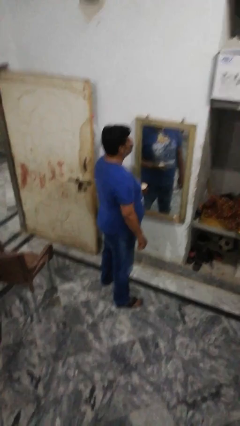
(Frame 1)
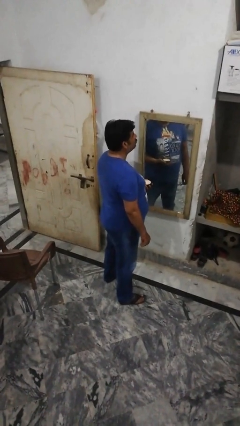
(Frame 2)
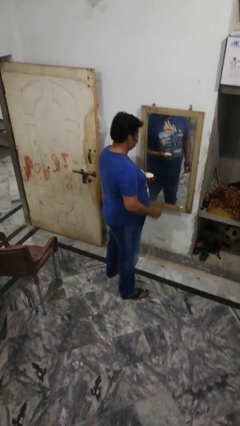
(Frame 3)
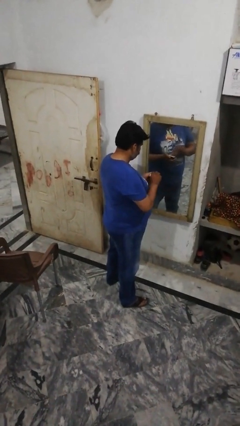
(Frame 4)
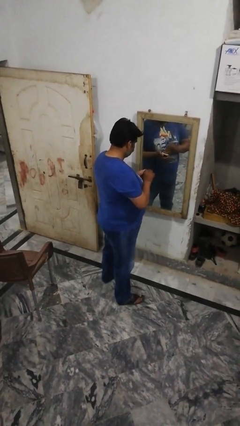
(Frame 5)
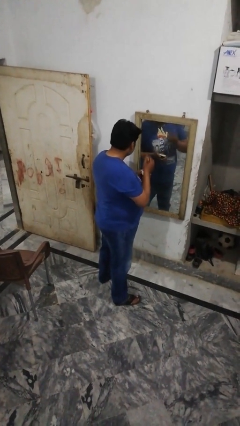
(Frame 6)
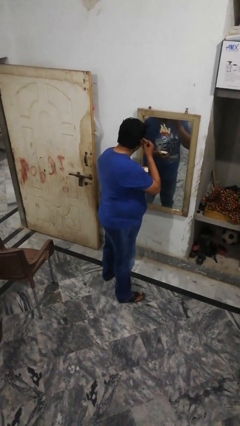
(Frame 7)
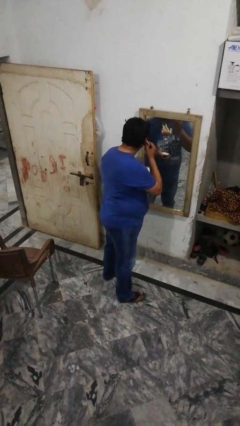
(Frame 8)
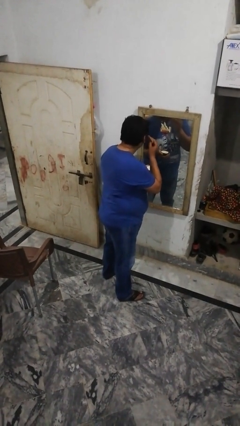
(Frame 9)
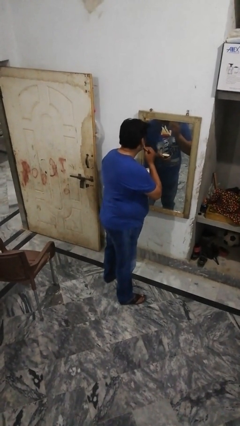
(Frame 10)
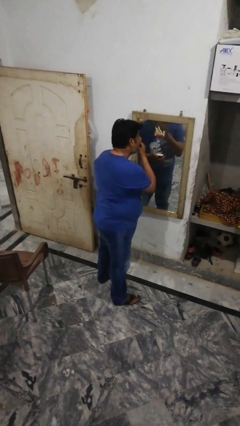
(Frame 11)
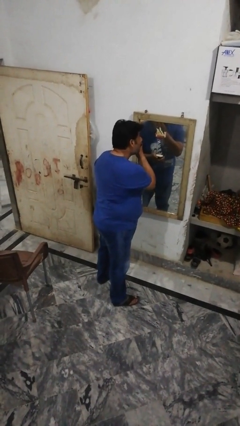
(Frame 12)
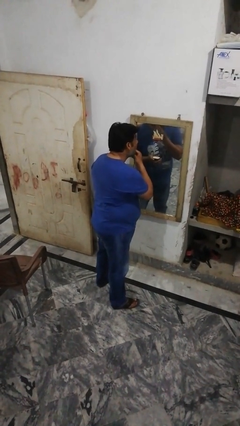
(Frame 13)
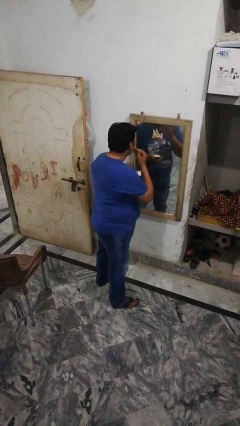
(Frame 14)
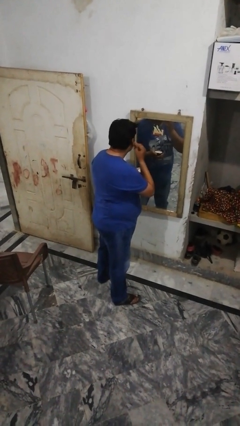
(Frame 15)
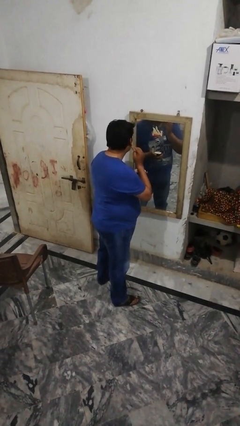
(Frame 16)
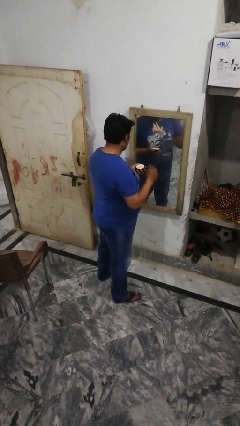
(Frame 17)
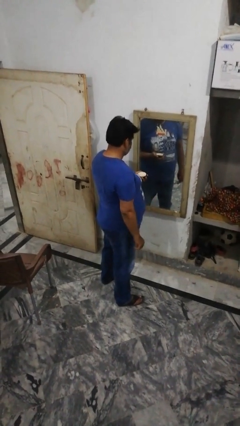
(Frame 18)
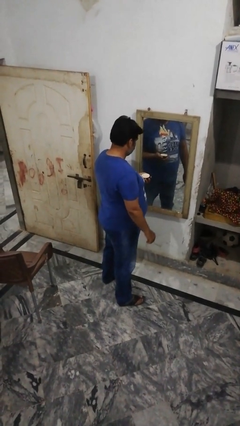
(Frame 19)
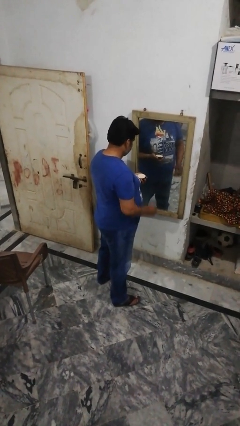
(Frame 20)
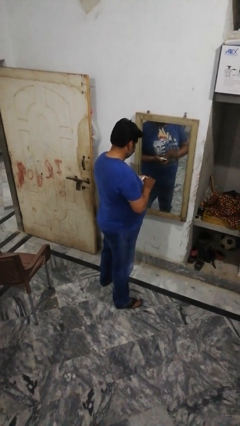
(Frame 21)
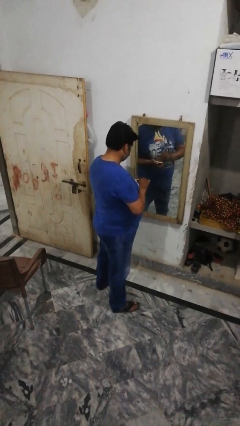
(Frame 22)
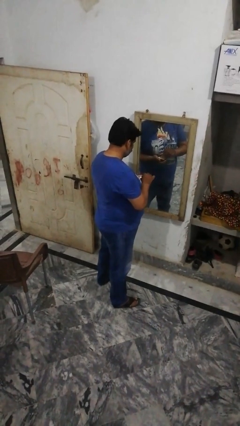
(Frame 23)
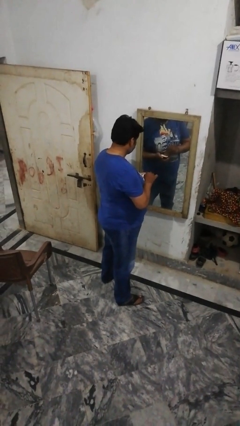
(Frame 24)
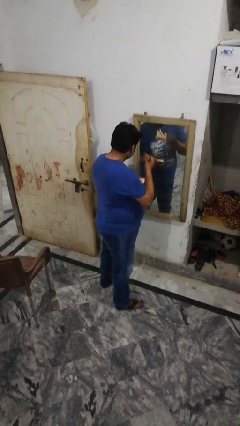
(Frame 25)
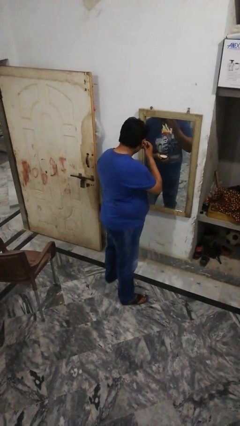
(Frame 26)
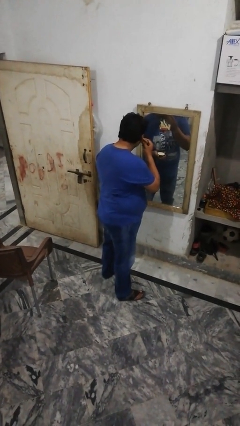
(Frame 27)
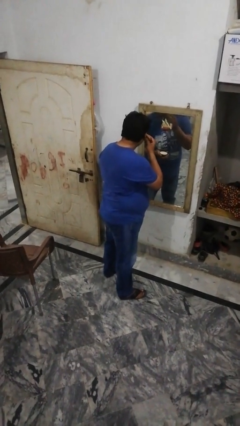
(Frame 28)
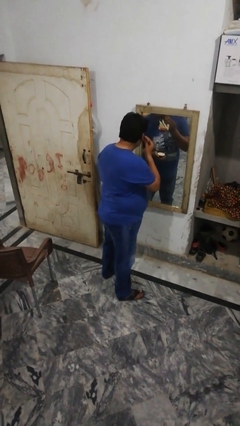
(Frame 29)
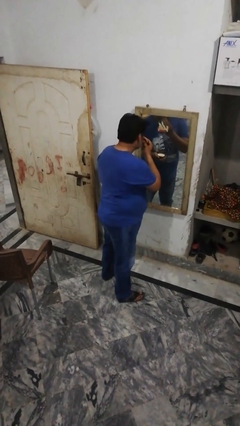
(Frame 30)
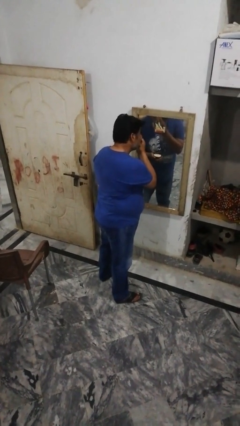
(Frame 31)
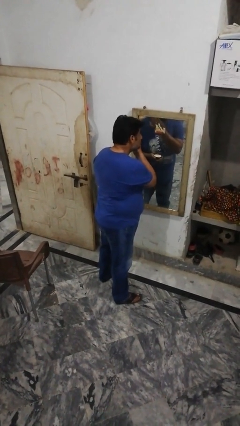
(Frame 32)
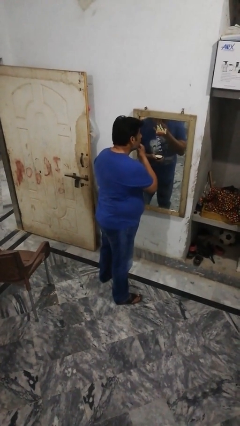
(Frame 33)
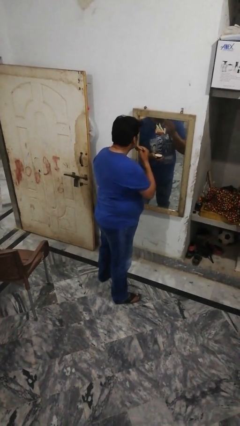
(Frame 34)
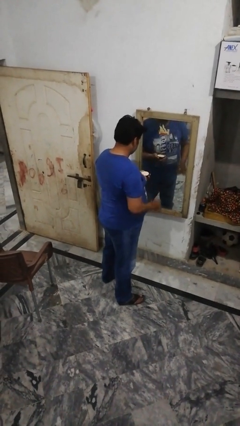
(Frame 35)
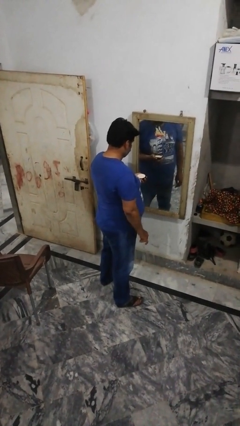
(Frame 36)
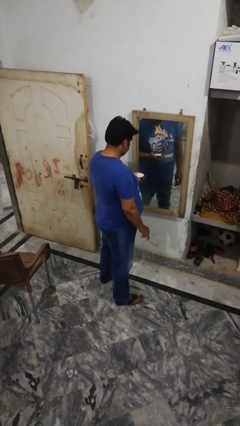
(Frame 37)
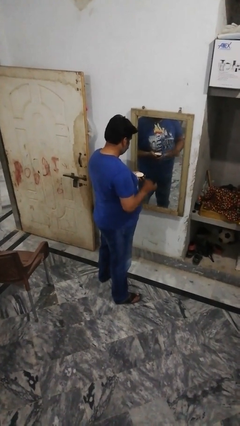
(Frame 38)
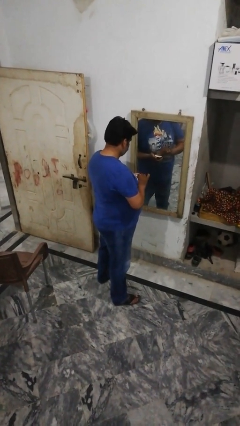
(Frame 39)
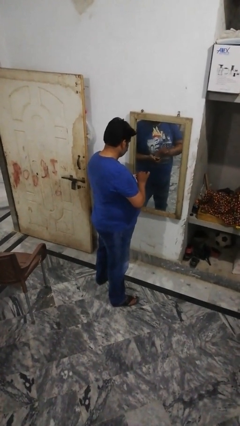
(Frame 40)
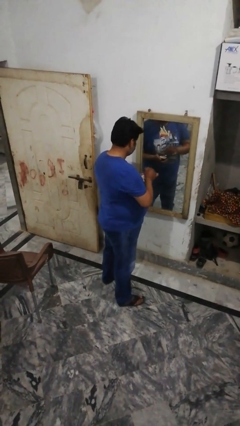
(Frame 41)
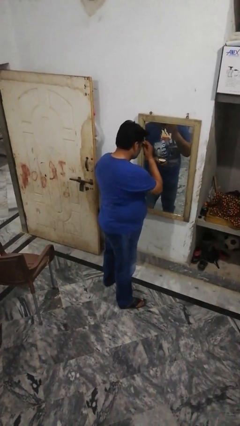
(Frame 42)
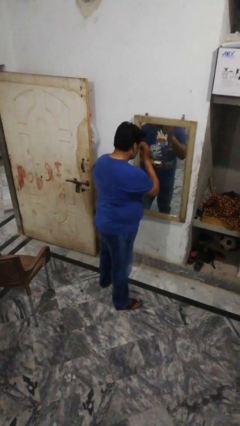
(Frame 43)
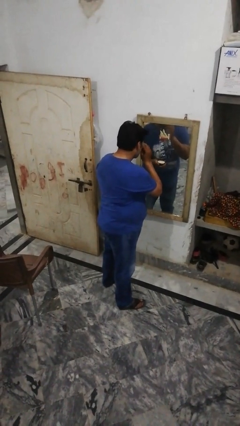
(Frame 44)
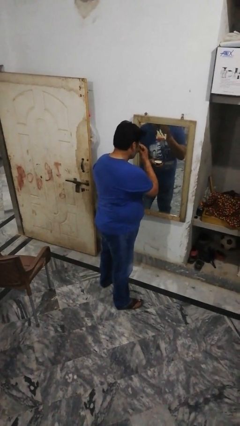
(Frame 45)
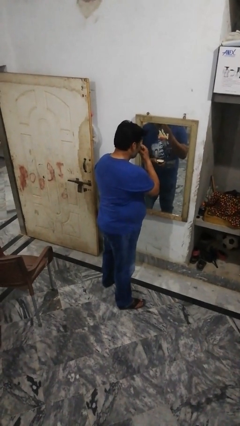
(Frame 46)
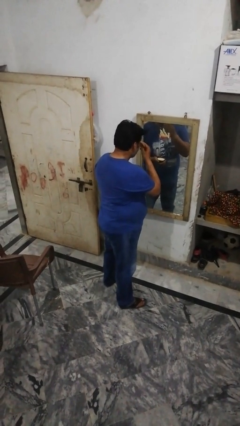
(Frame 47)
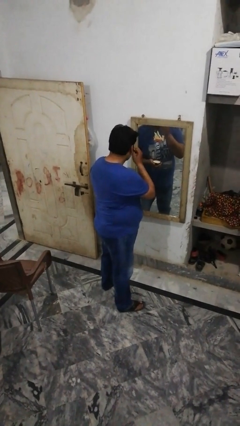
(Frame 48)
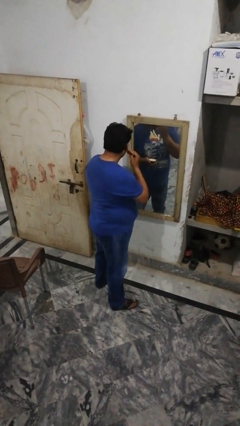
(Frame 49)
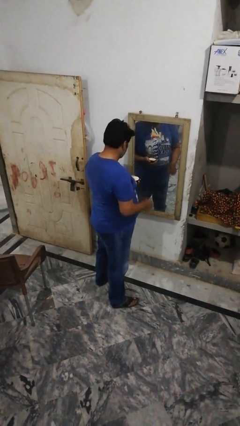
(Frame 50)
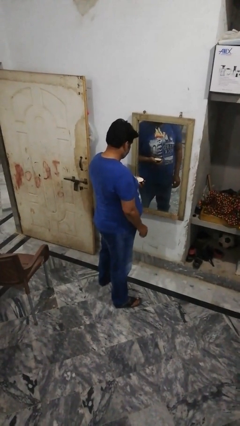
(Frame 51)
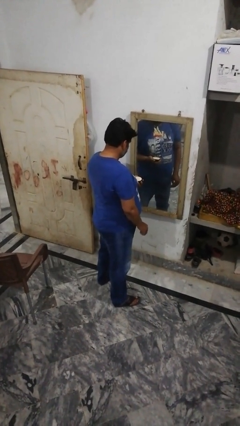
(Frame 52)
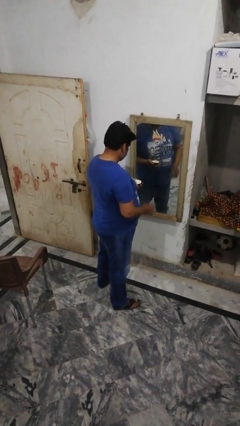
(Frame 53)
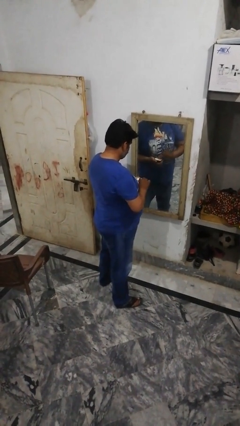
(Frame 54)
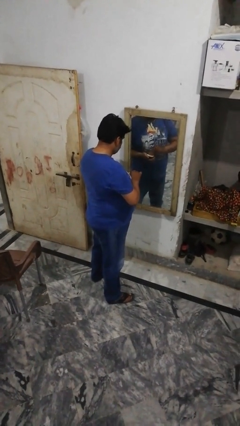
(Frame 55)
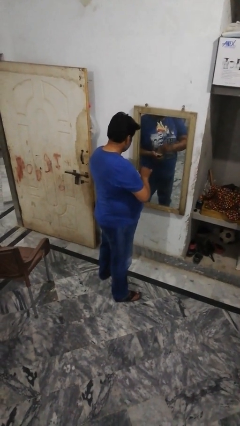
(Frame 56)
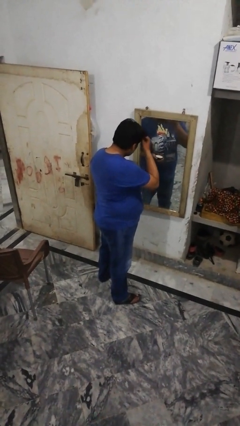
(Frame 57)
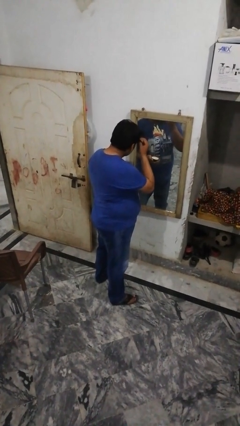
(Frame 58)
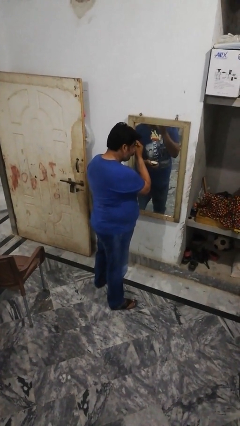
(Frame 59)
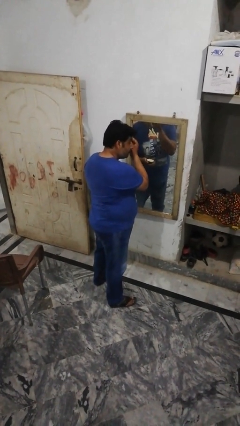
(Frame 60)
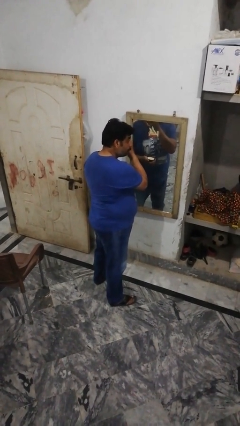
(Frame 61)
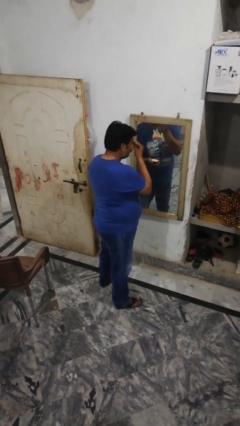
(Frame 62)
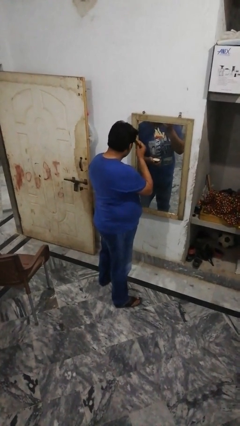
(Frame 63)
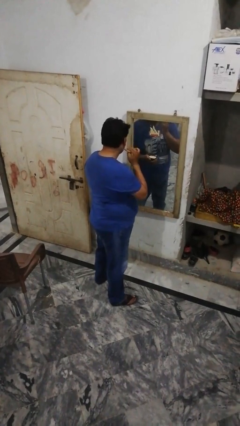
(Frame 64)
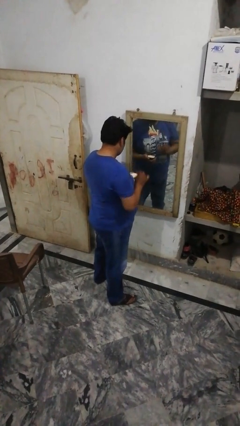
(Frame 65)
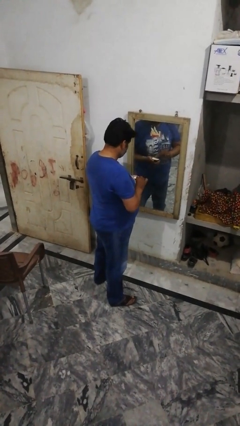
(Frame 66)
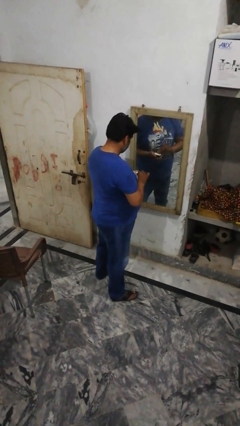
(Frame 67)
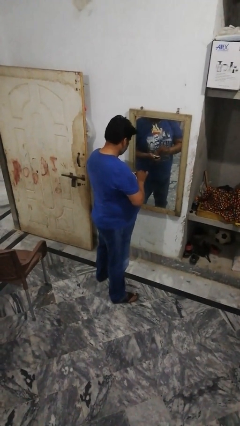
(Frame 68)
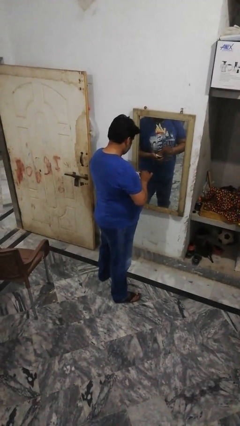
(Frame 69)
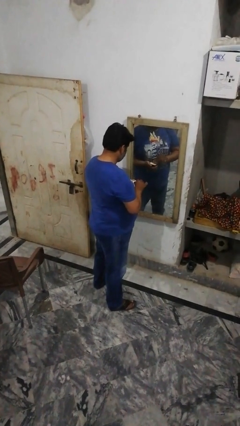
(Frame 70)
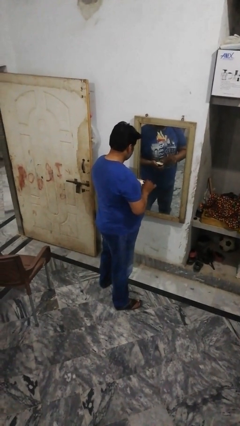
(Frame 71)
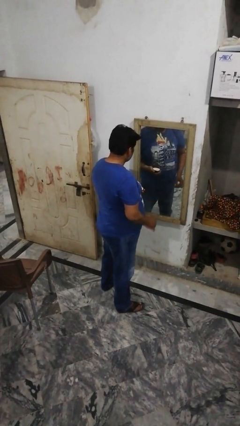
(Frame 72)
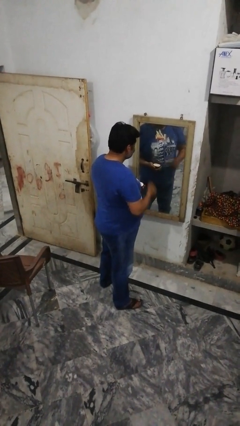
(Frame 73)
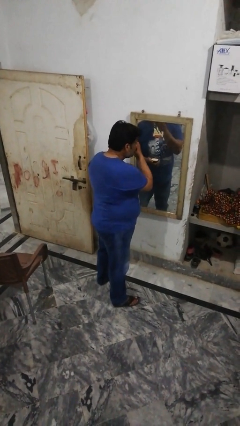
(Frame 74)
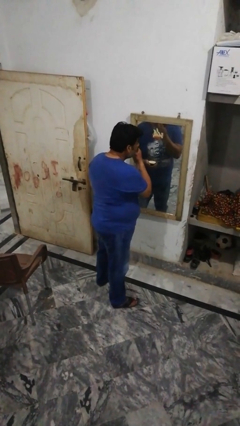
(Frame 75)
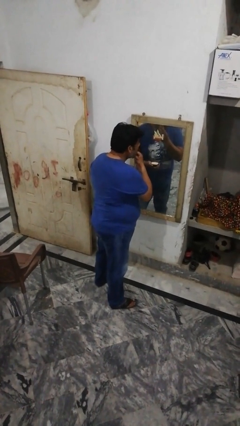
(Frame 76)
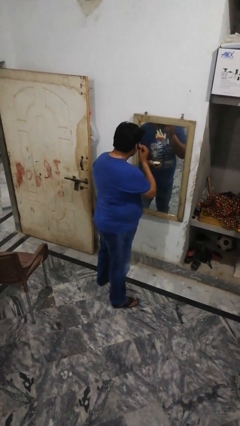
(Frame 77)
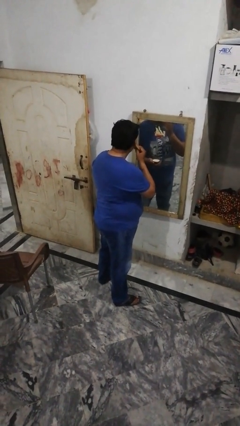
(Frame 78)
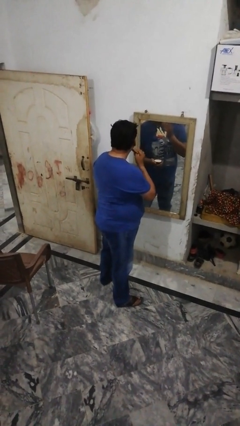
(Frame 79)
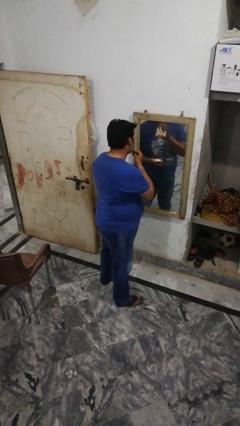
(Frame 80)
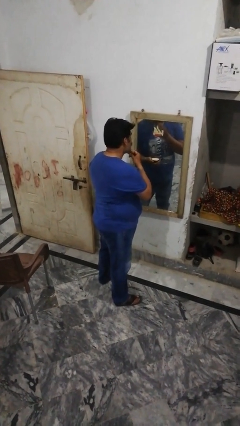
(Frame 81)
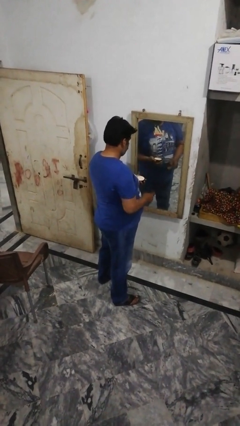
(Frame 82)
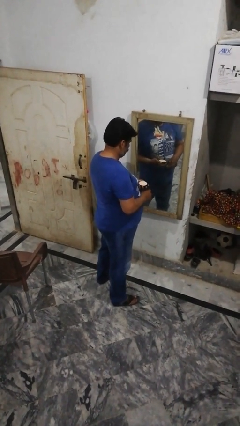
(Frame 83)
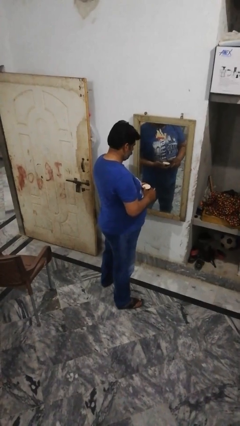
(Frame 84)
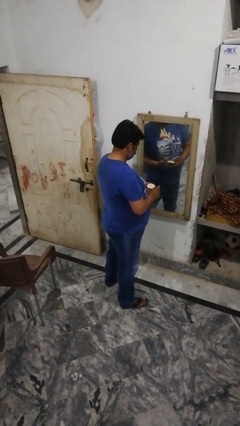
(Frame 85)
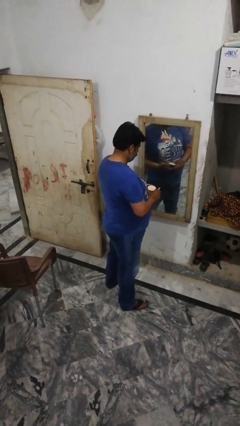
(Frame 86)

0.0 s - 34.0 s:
person applies foundation makeup

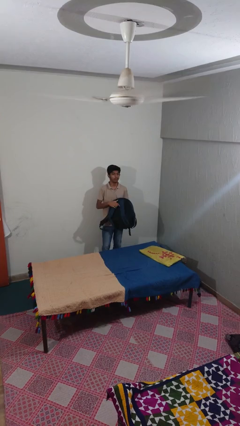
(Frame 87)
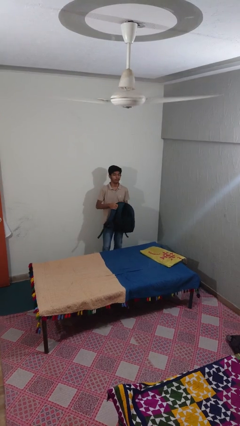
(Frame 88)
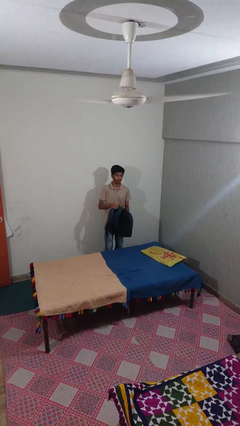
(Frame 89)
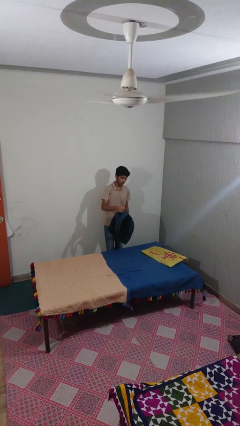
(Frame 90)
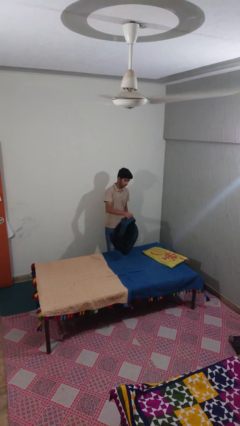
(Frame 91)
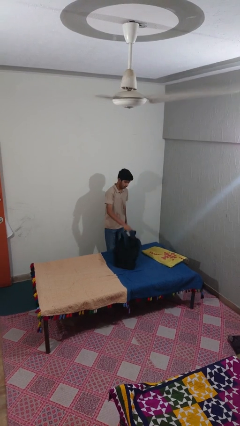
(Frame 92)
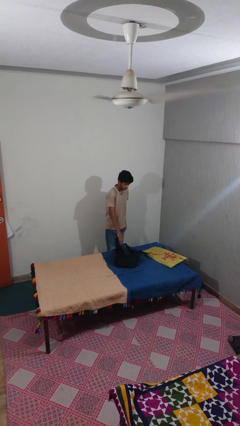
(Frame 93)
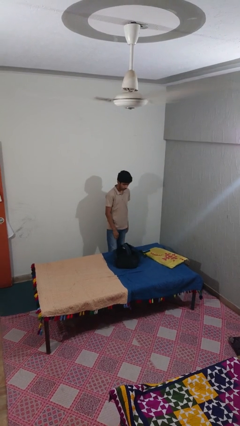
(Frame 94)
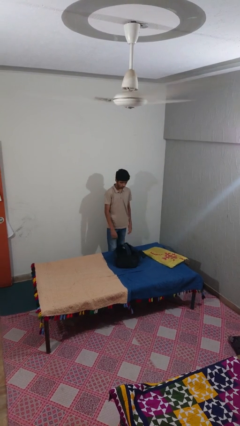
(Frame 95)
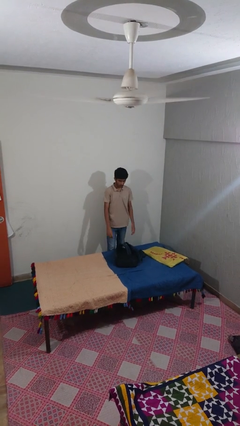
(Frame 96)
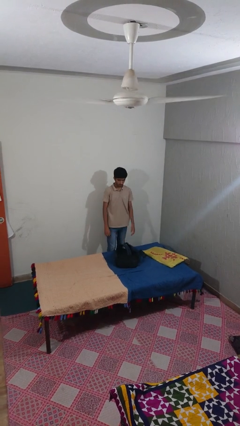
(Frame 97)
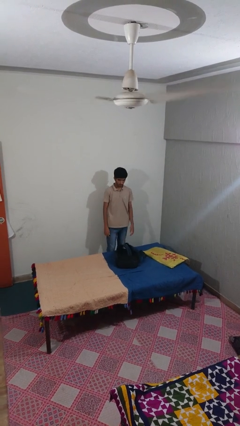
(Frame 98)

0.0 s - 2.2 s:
person puts down object on bed
